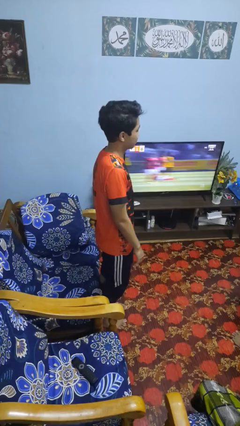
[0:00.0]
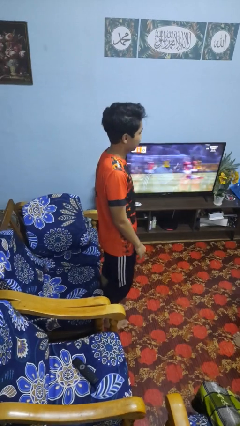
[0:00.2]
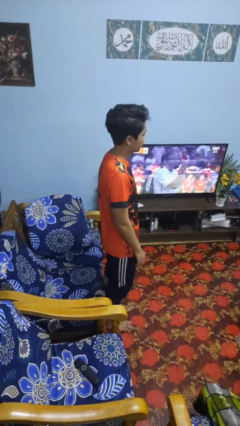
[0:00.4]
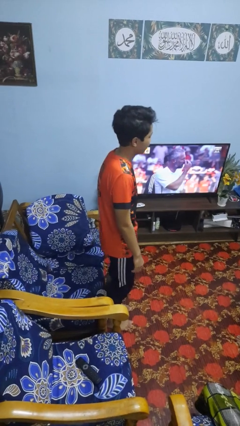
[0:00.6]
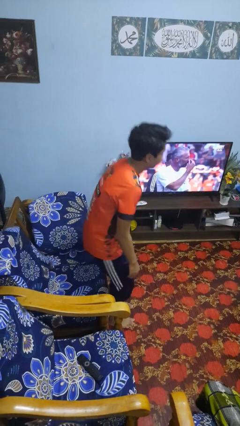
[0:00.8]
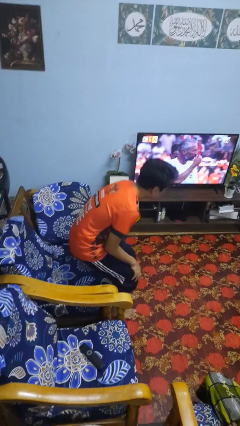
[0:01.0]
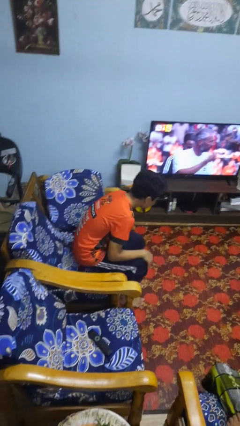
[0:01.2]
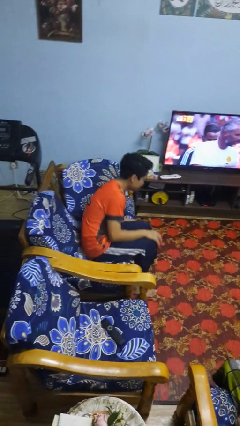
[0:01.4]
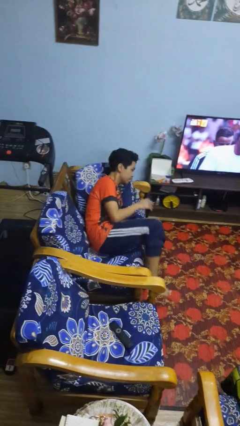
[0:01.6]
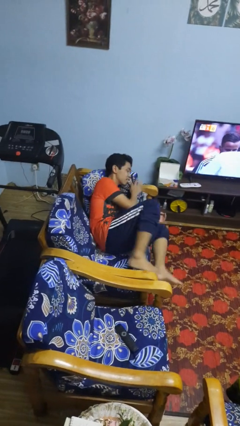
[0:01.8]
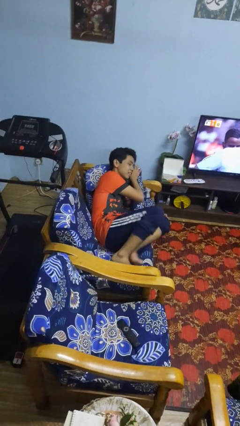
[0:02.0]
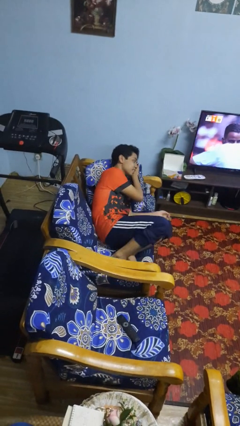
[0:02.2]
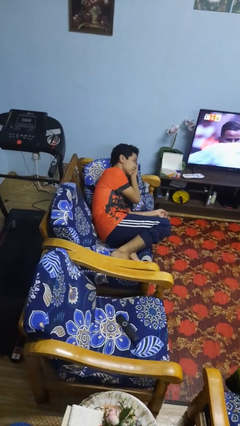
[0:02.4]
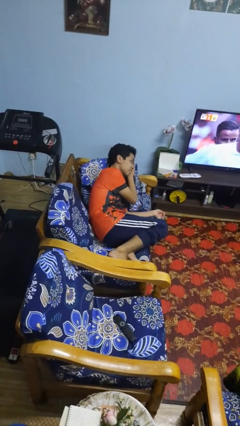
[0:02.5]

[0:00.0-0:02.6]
person lies down on couch

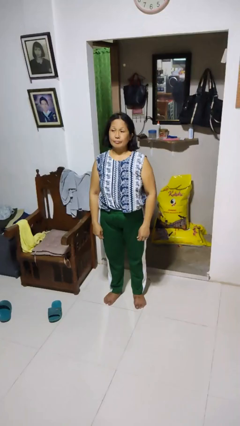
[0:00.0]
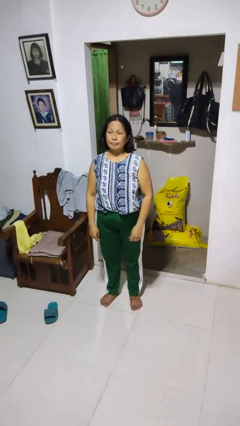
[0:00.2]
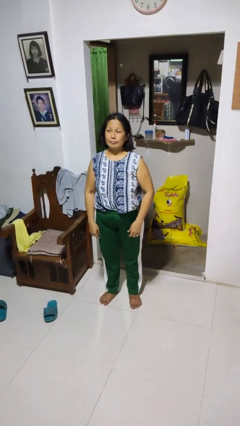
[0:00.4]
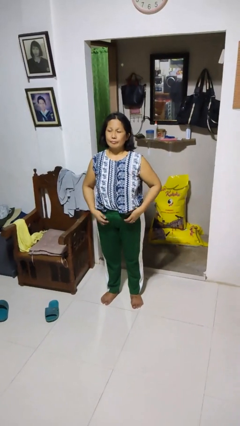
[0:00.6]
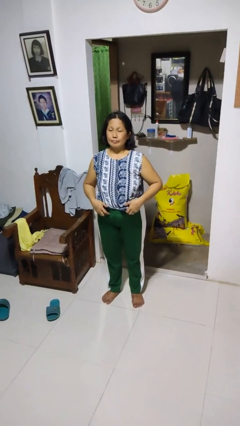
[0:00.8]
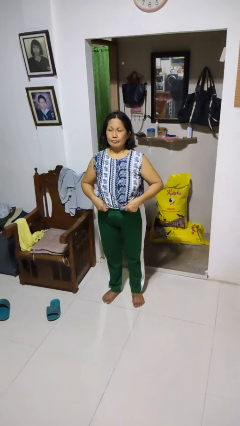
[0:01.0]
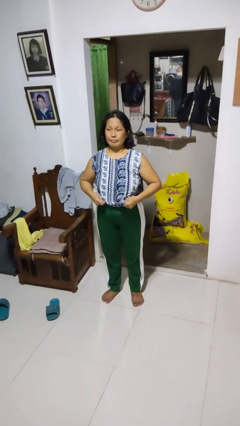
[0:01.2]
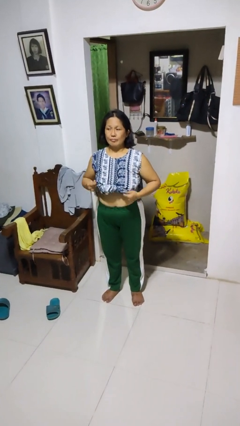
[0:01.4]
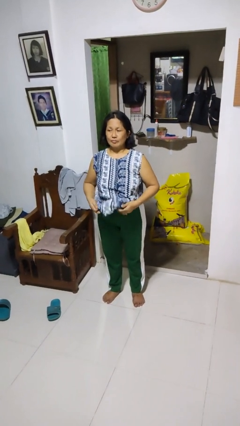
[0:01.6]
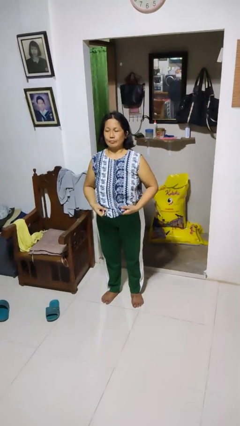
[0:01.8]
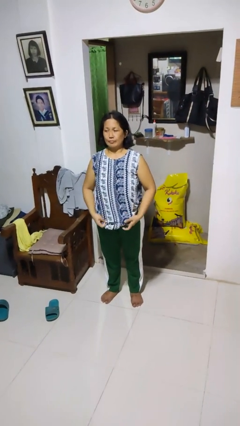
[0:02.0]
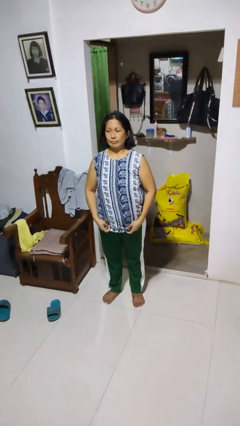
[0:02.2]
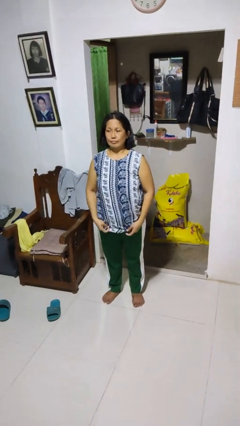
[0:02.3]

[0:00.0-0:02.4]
person untucks shirt

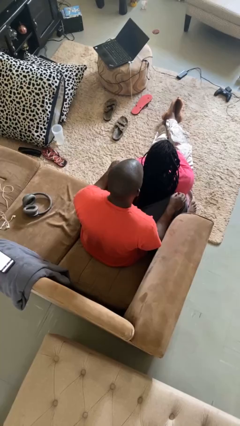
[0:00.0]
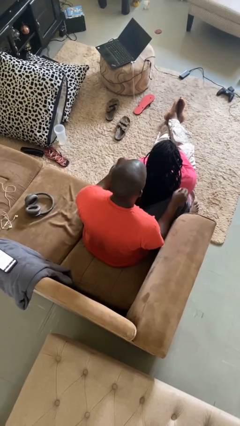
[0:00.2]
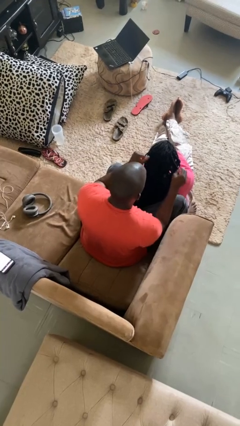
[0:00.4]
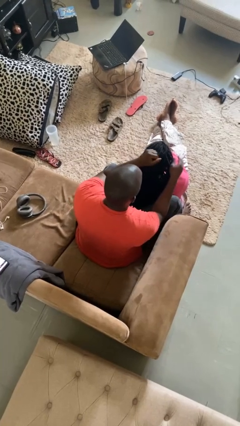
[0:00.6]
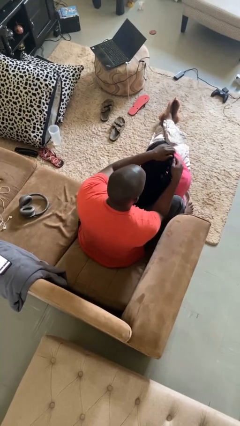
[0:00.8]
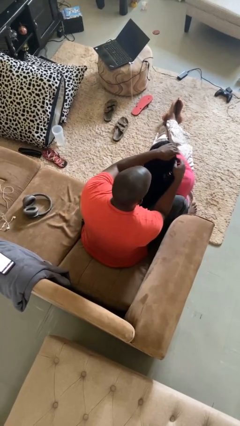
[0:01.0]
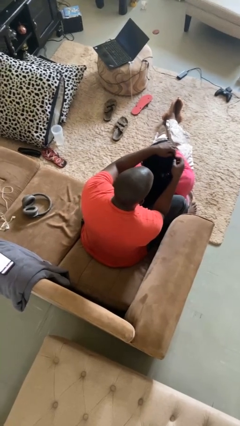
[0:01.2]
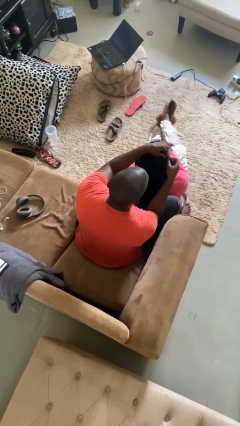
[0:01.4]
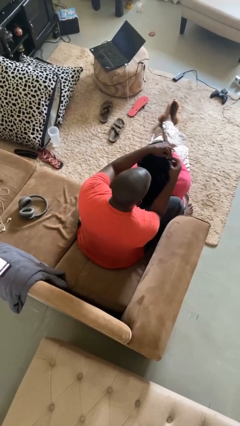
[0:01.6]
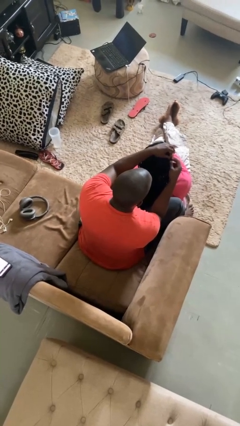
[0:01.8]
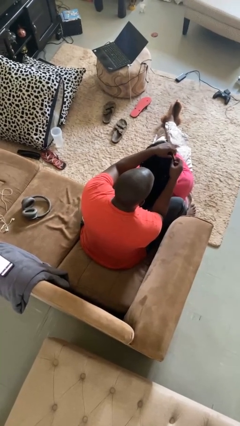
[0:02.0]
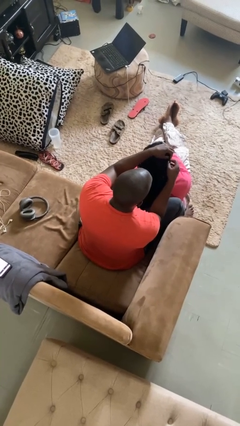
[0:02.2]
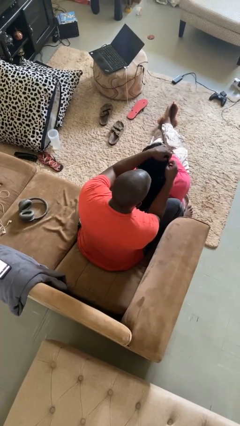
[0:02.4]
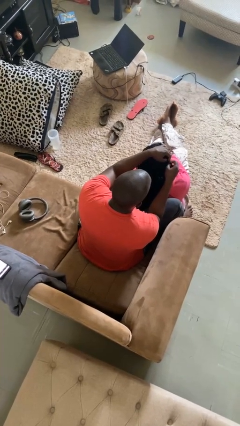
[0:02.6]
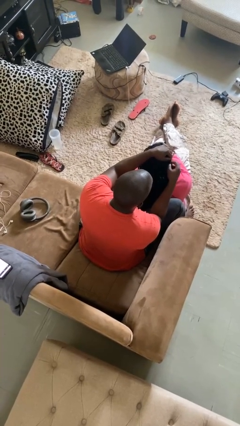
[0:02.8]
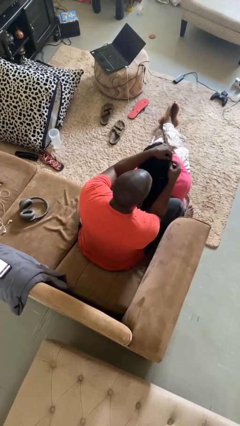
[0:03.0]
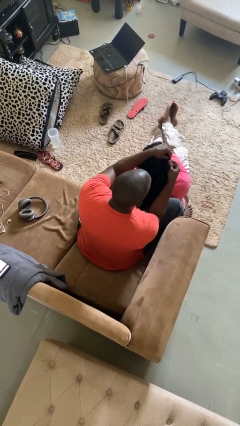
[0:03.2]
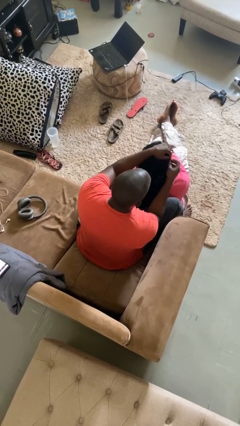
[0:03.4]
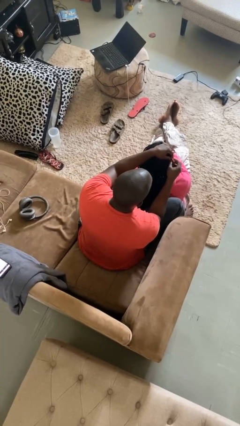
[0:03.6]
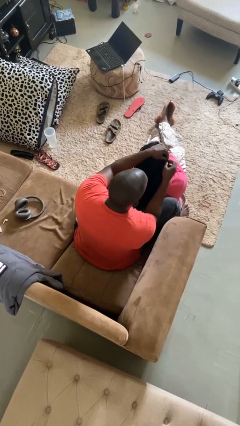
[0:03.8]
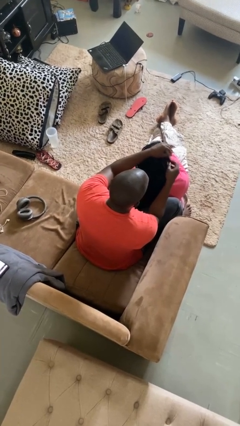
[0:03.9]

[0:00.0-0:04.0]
person braids hair of person

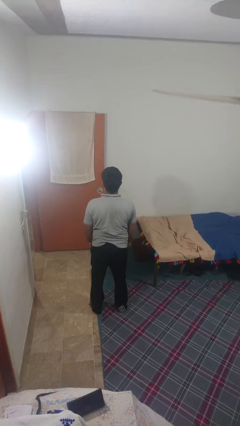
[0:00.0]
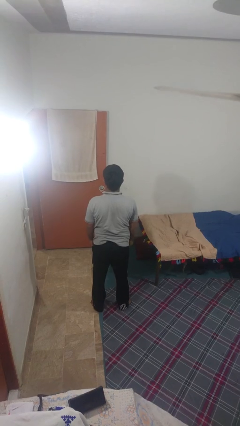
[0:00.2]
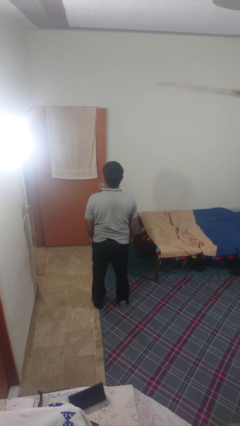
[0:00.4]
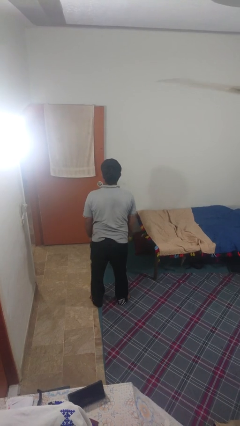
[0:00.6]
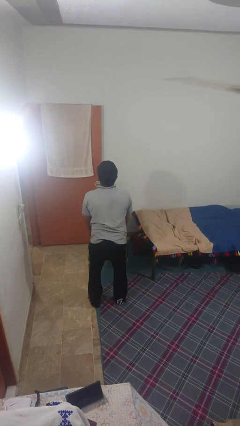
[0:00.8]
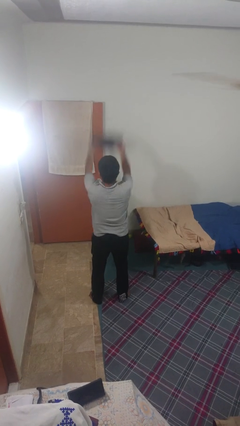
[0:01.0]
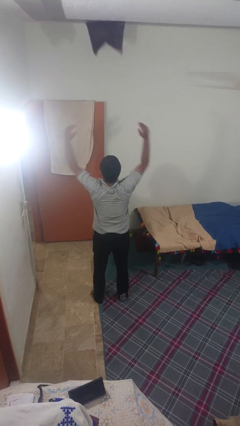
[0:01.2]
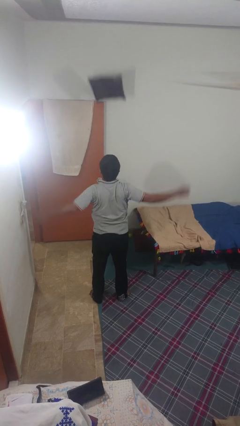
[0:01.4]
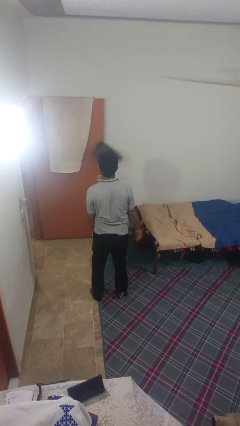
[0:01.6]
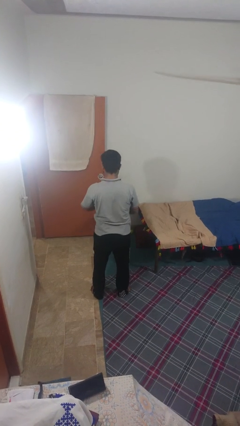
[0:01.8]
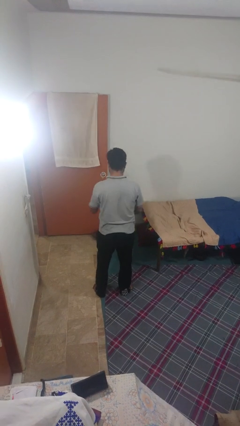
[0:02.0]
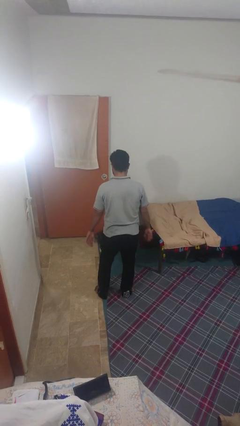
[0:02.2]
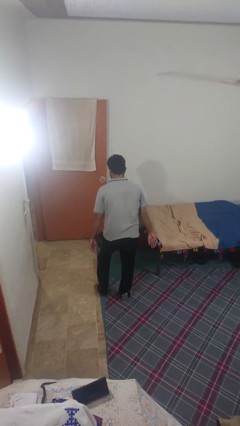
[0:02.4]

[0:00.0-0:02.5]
person throws object into air

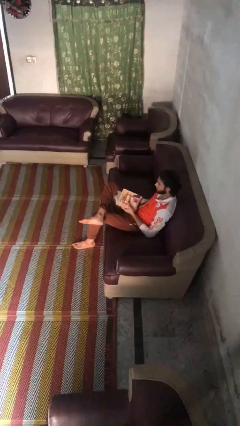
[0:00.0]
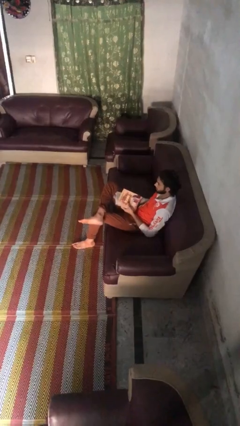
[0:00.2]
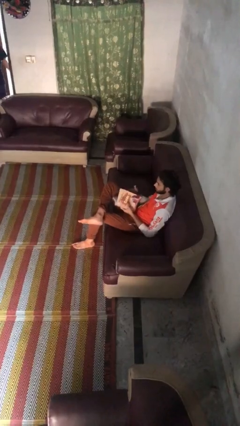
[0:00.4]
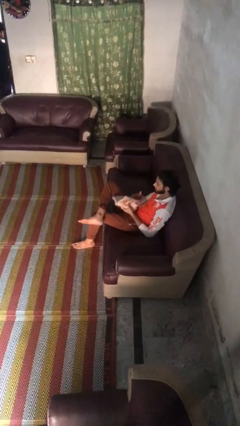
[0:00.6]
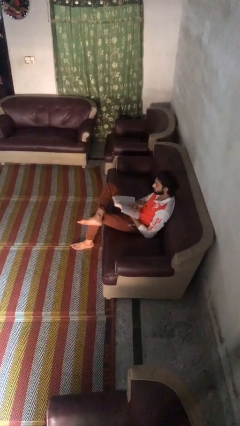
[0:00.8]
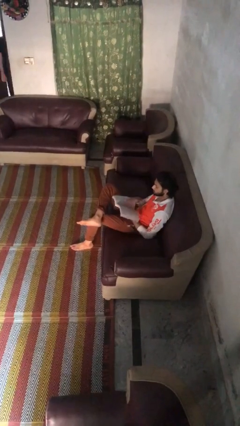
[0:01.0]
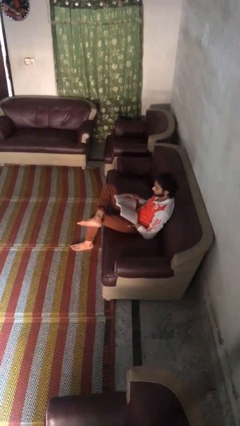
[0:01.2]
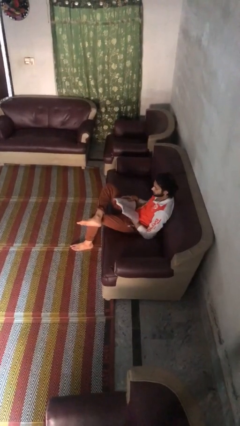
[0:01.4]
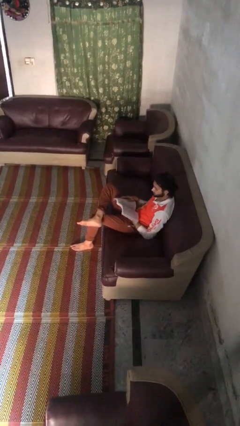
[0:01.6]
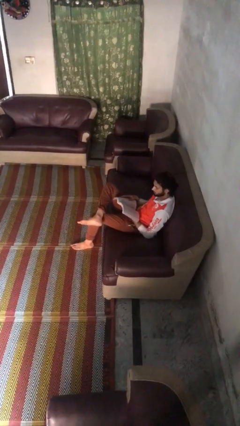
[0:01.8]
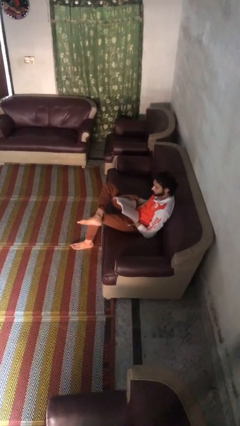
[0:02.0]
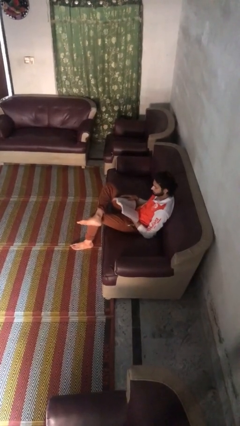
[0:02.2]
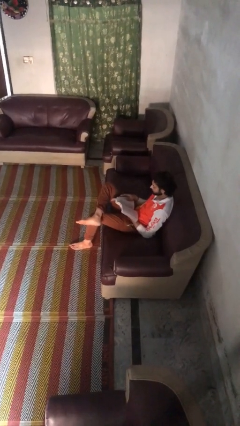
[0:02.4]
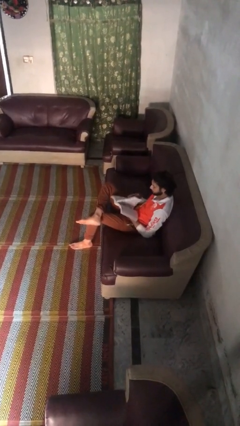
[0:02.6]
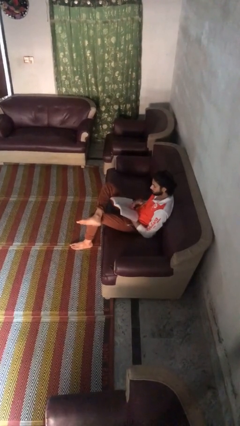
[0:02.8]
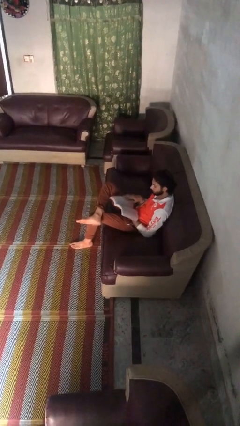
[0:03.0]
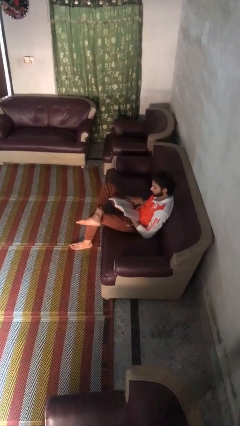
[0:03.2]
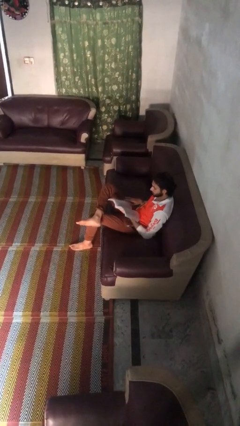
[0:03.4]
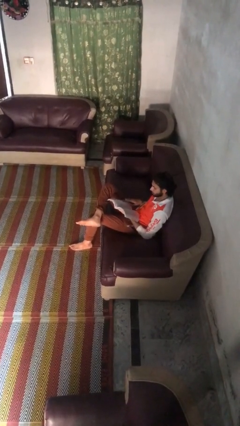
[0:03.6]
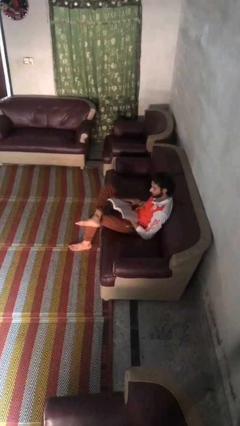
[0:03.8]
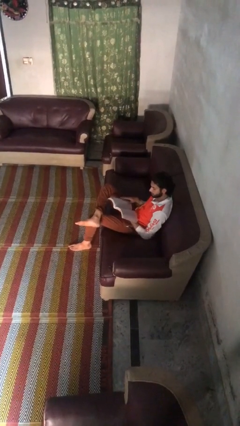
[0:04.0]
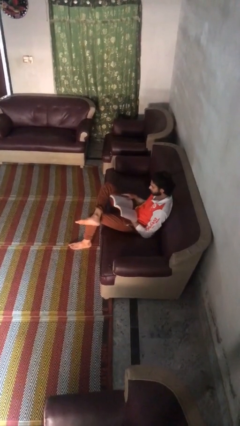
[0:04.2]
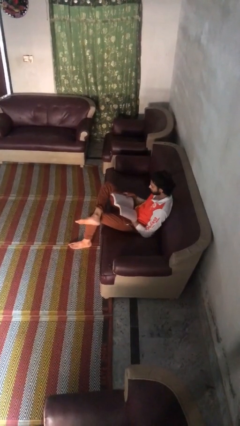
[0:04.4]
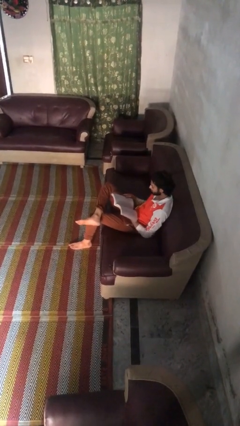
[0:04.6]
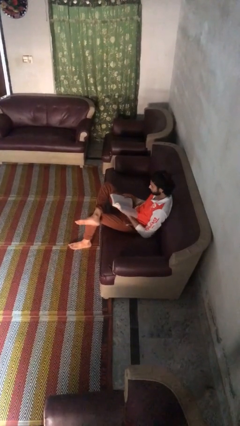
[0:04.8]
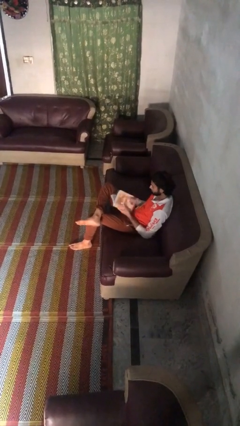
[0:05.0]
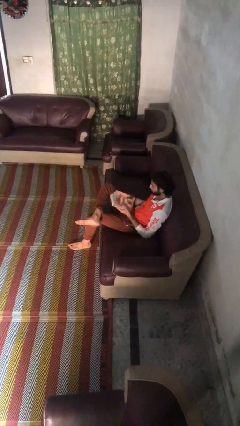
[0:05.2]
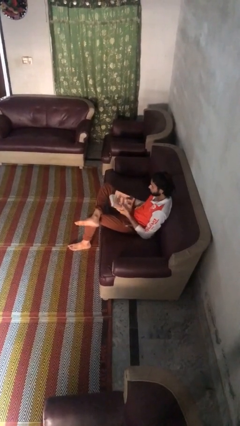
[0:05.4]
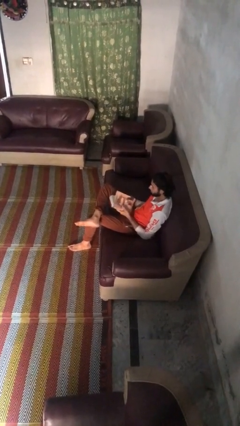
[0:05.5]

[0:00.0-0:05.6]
person reads book

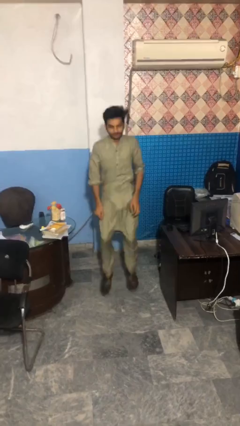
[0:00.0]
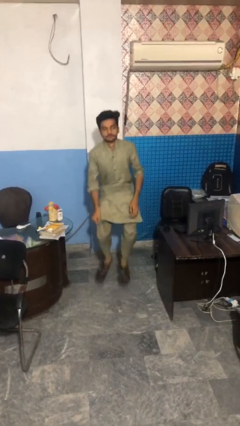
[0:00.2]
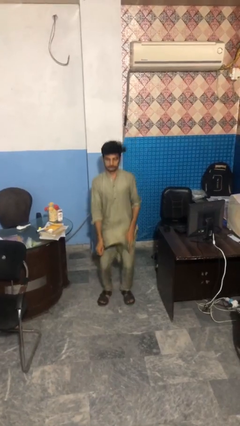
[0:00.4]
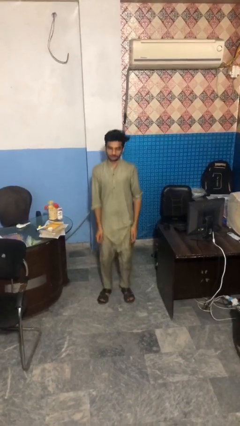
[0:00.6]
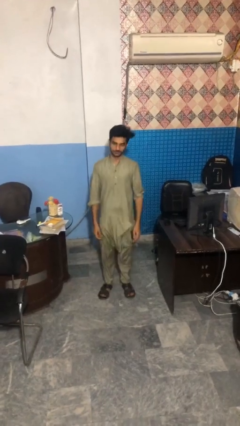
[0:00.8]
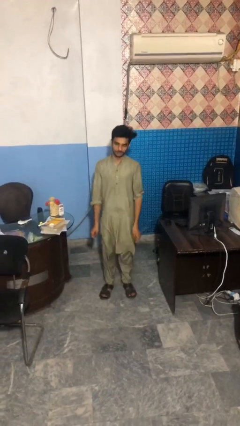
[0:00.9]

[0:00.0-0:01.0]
person jumps
